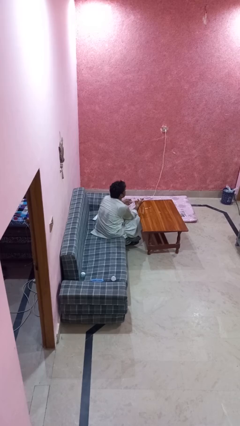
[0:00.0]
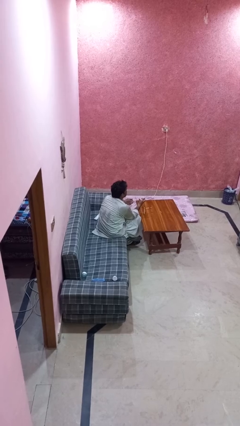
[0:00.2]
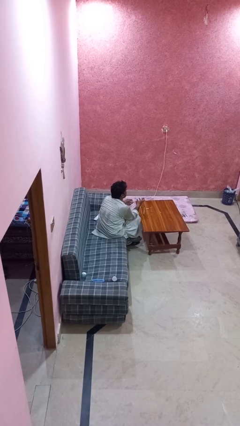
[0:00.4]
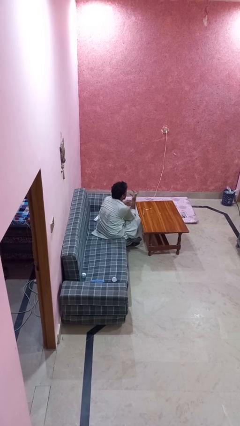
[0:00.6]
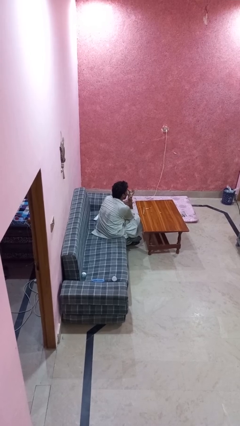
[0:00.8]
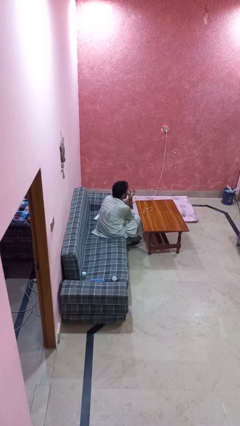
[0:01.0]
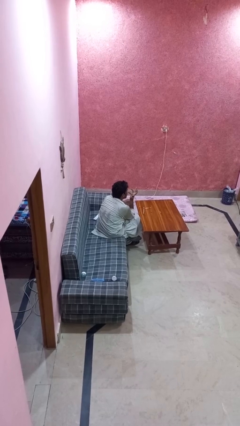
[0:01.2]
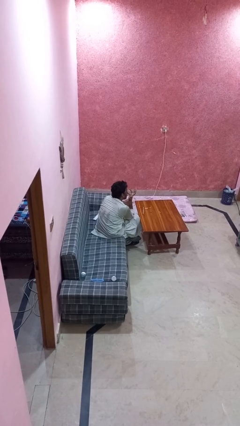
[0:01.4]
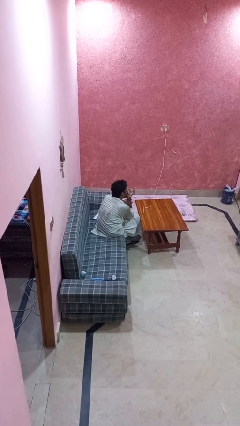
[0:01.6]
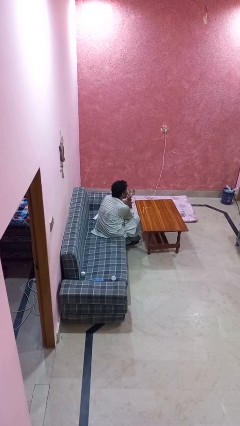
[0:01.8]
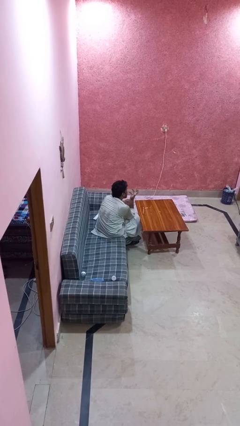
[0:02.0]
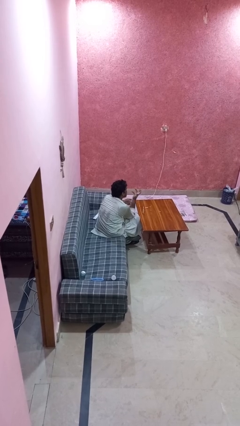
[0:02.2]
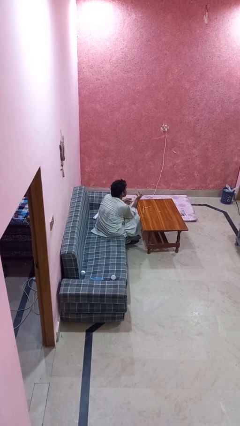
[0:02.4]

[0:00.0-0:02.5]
person licks fingers

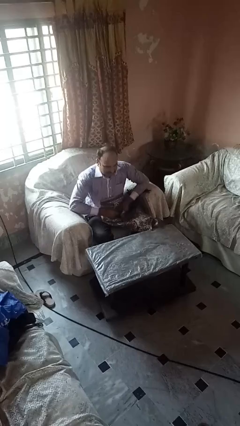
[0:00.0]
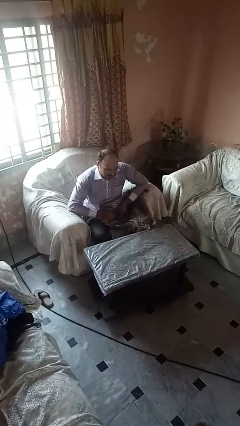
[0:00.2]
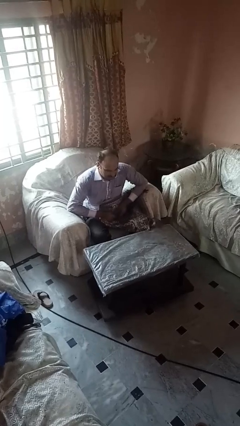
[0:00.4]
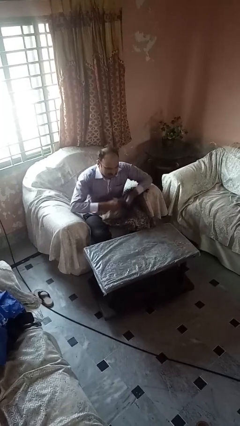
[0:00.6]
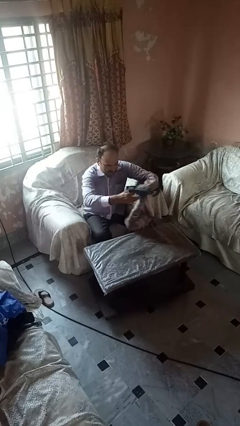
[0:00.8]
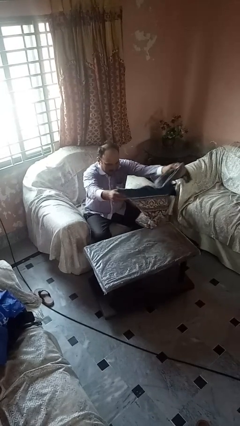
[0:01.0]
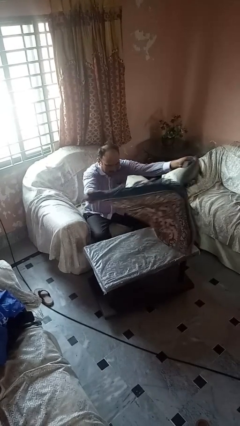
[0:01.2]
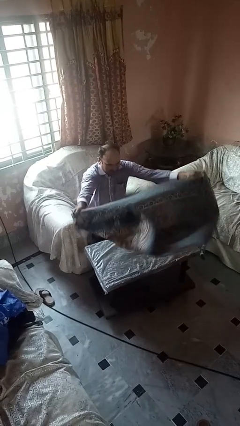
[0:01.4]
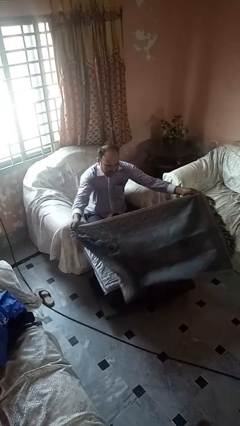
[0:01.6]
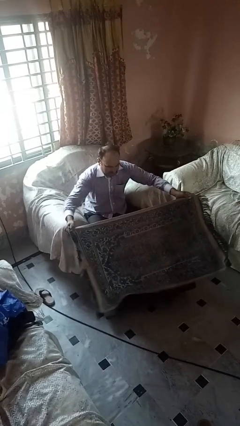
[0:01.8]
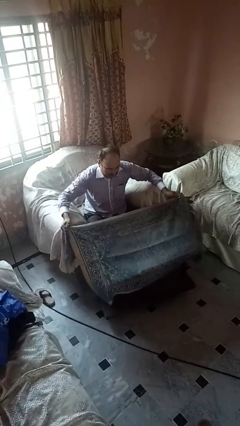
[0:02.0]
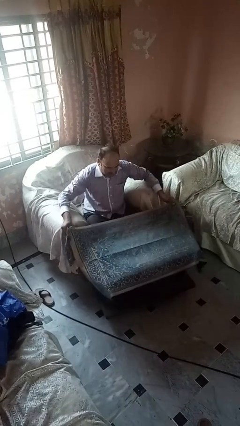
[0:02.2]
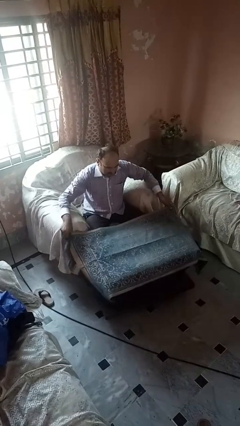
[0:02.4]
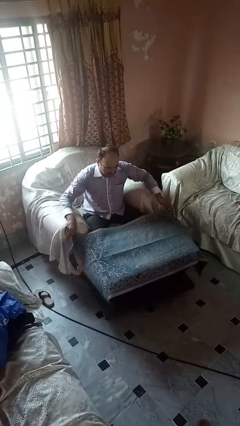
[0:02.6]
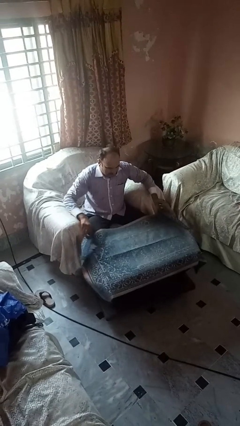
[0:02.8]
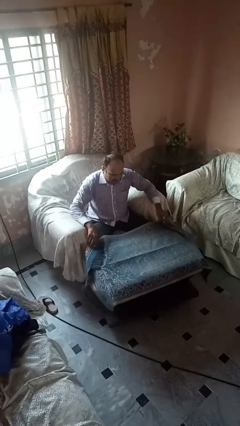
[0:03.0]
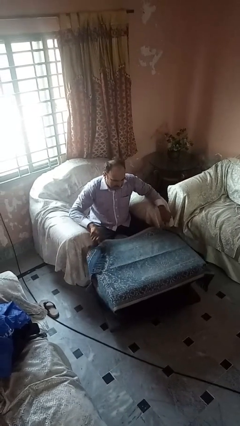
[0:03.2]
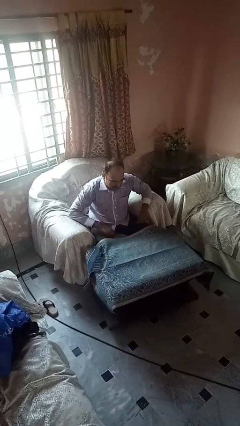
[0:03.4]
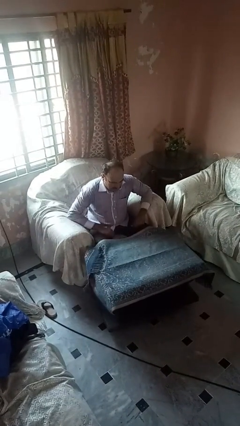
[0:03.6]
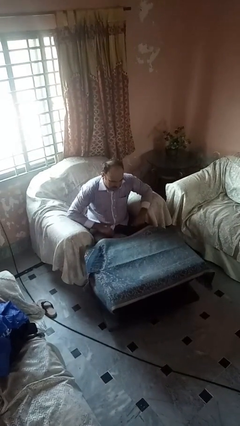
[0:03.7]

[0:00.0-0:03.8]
person spreads tablecloth

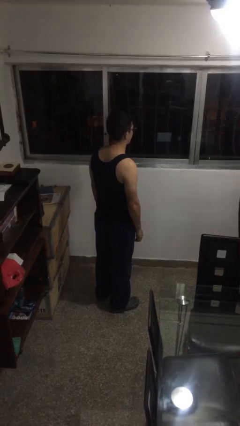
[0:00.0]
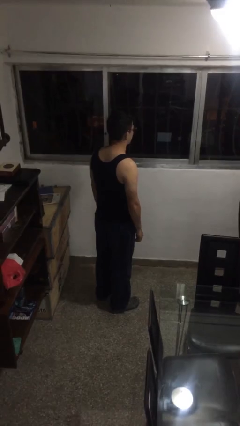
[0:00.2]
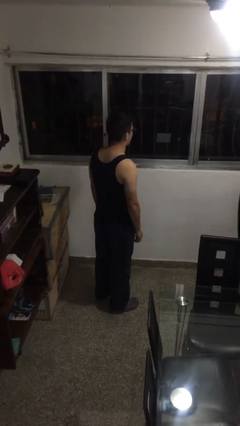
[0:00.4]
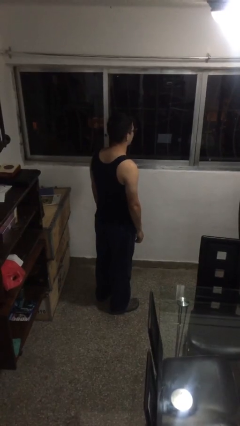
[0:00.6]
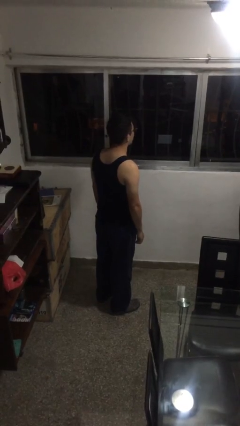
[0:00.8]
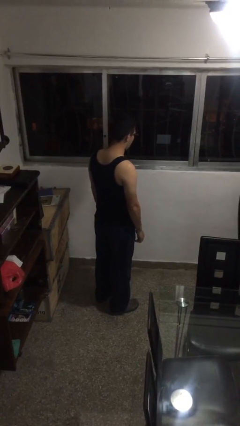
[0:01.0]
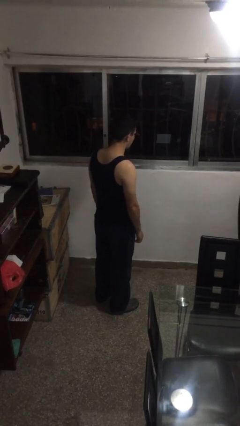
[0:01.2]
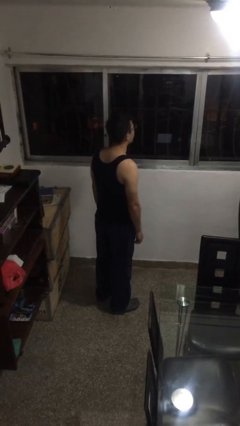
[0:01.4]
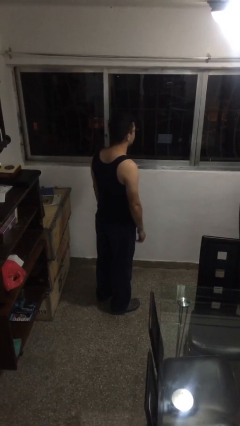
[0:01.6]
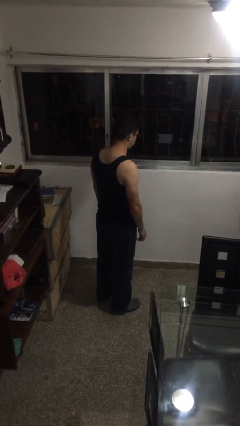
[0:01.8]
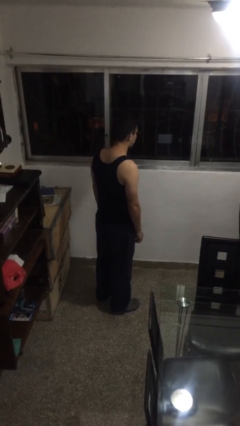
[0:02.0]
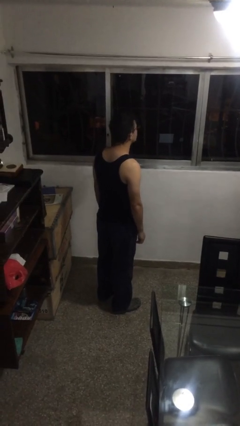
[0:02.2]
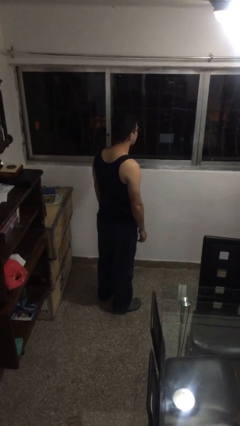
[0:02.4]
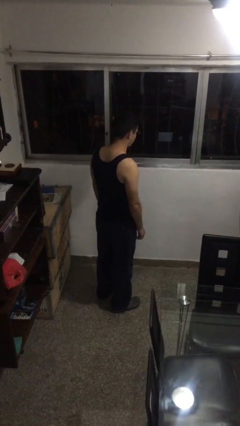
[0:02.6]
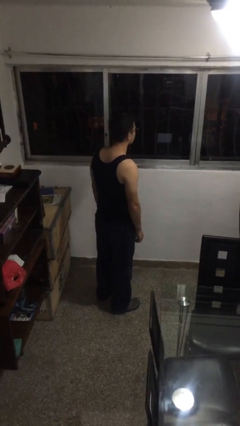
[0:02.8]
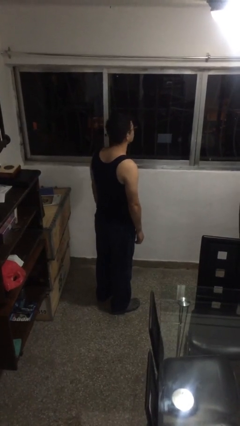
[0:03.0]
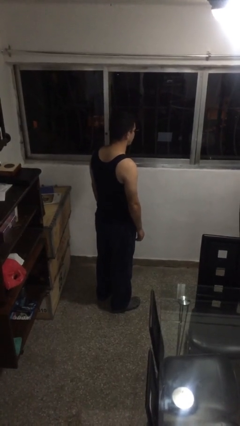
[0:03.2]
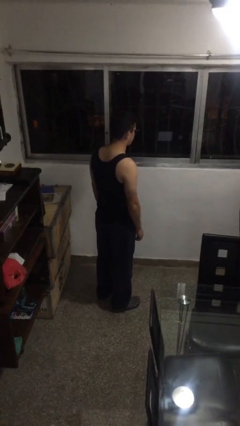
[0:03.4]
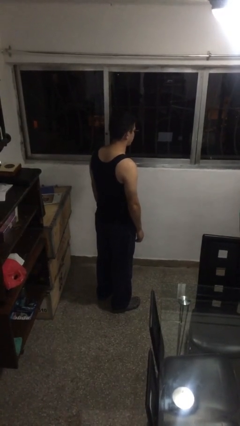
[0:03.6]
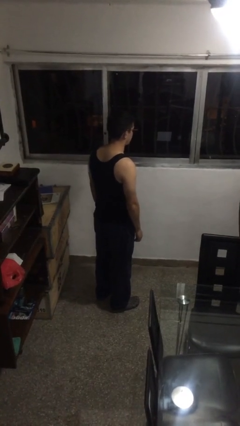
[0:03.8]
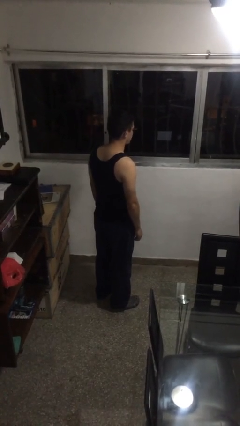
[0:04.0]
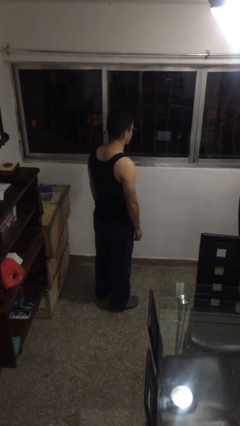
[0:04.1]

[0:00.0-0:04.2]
person nods head

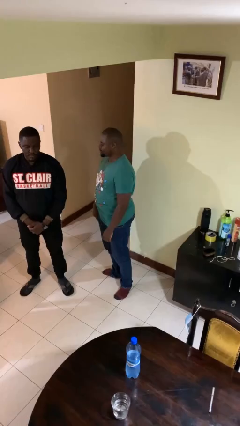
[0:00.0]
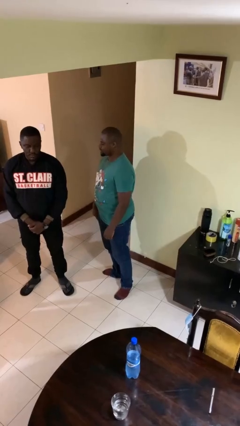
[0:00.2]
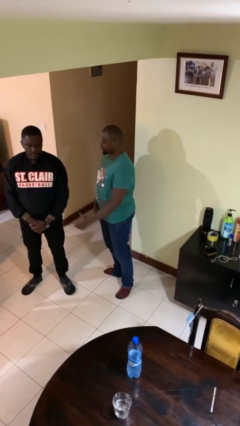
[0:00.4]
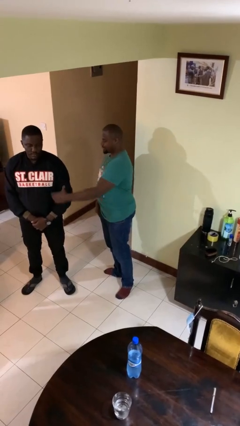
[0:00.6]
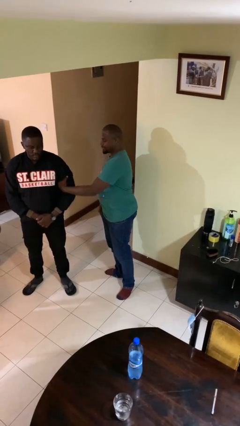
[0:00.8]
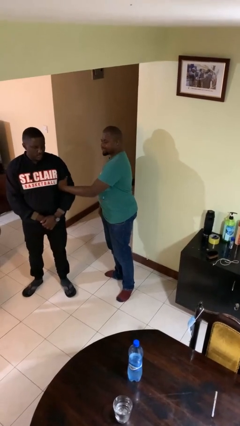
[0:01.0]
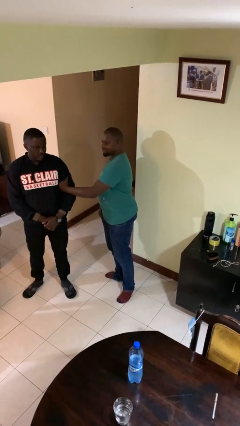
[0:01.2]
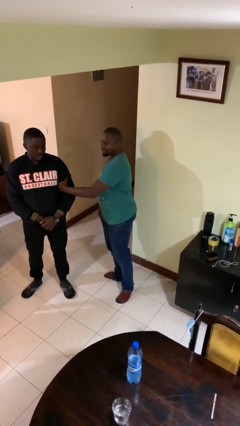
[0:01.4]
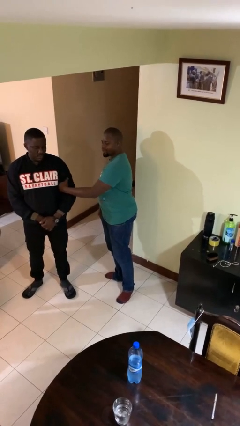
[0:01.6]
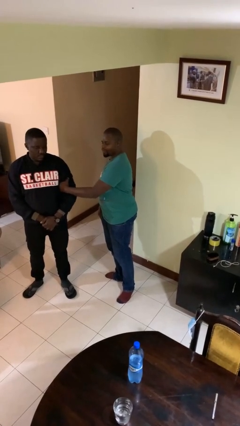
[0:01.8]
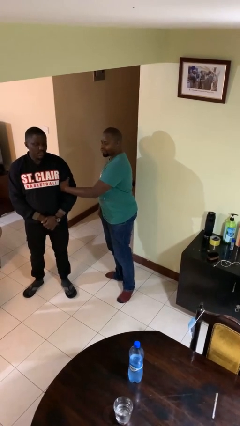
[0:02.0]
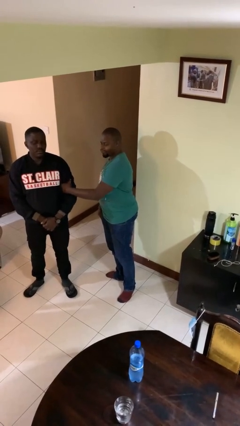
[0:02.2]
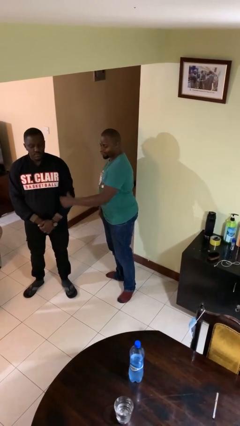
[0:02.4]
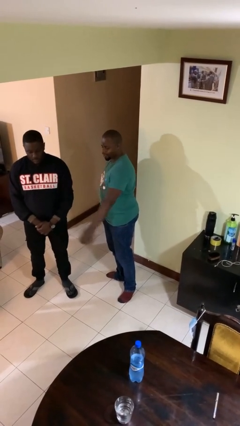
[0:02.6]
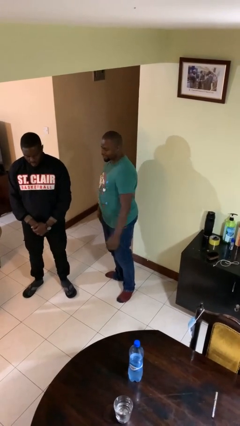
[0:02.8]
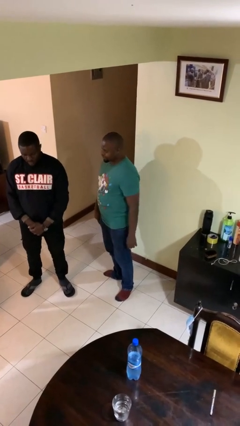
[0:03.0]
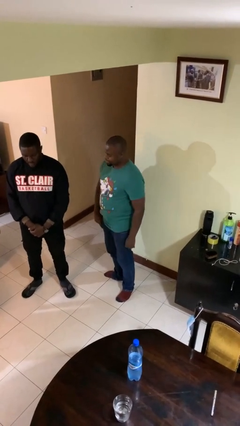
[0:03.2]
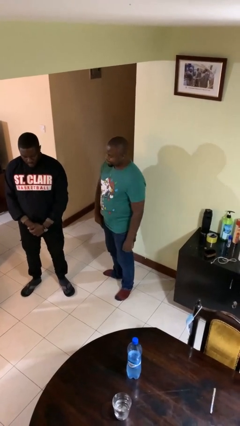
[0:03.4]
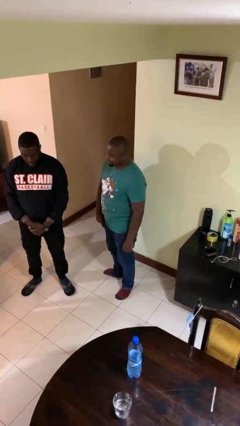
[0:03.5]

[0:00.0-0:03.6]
person grabs person by bicep

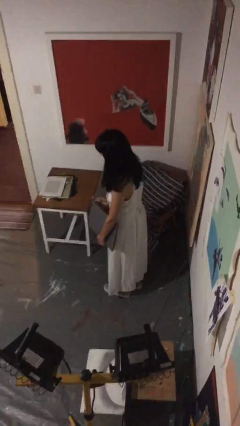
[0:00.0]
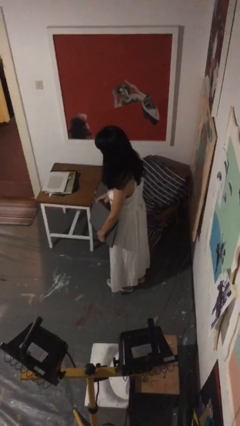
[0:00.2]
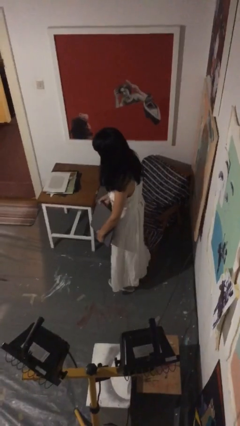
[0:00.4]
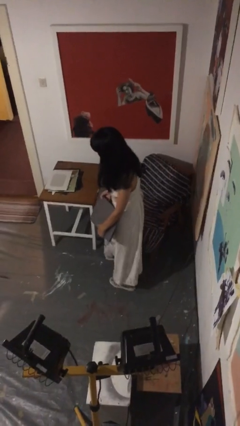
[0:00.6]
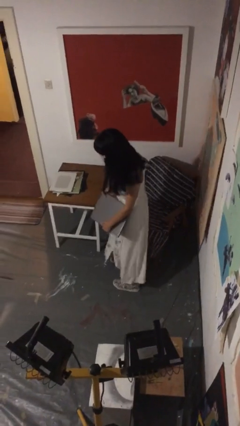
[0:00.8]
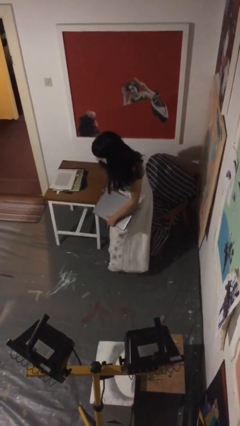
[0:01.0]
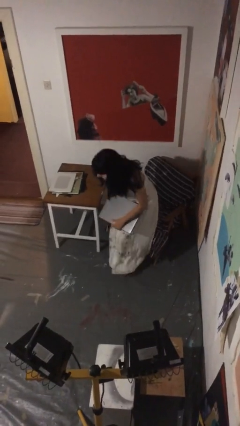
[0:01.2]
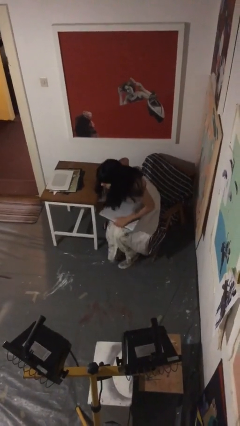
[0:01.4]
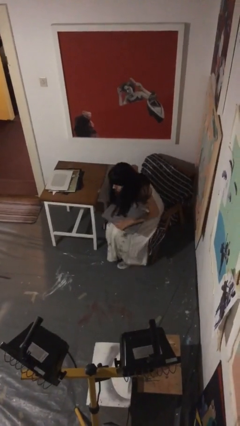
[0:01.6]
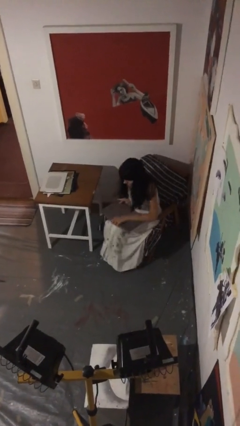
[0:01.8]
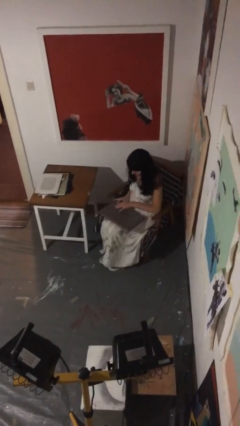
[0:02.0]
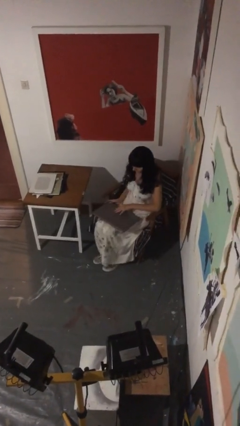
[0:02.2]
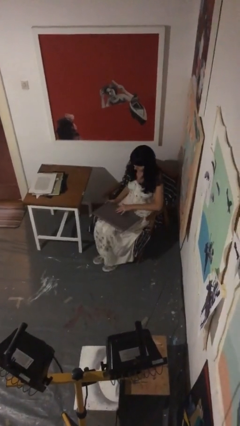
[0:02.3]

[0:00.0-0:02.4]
person sits down

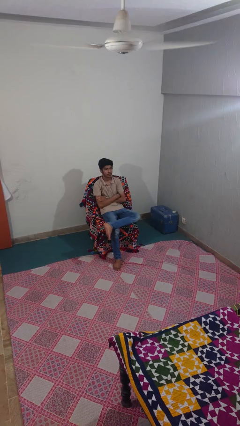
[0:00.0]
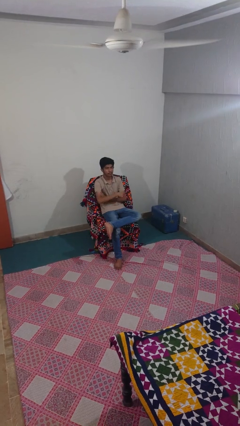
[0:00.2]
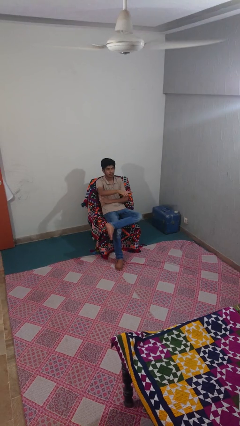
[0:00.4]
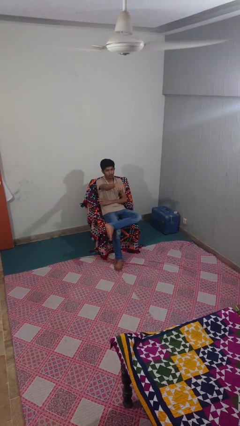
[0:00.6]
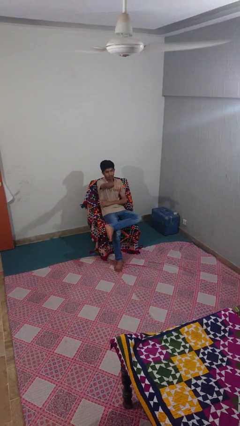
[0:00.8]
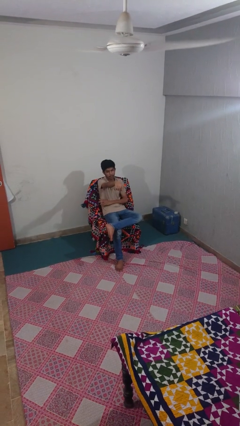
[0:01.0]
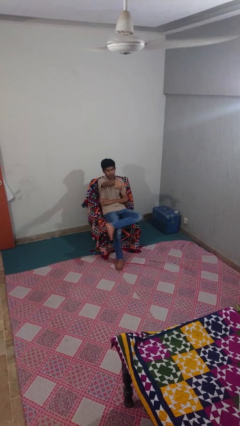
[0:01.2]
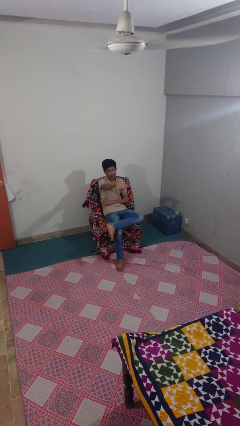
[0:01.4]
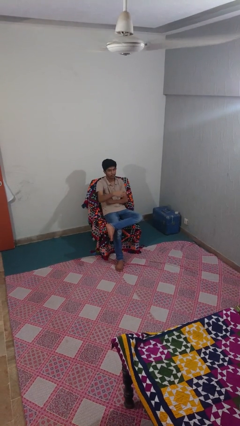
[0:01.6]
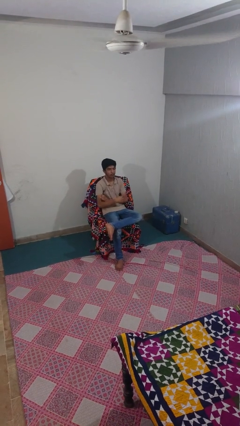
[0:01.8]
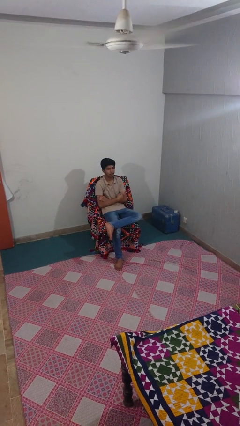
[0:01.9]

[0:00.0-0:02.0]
person points at person
